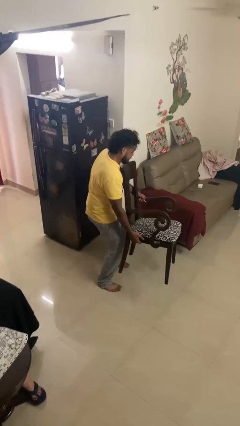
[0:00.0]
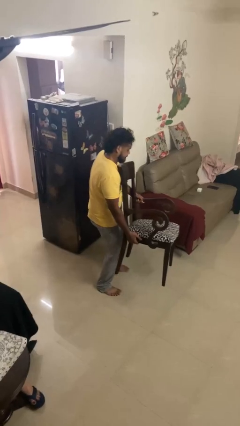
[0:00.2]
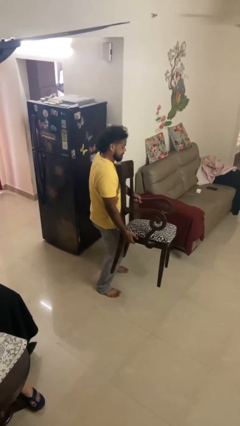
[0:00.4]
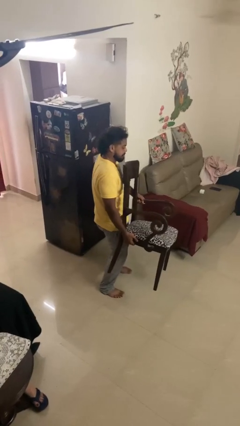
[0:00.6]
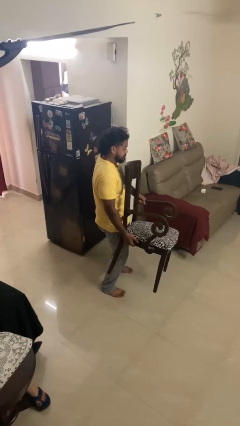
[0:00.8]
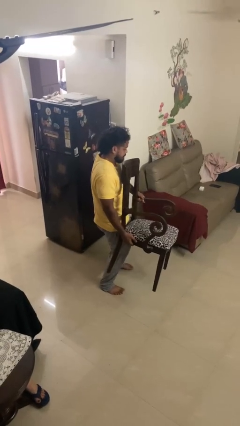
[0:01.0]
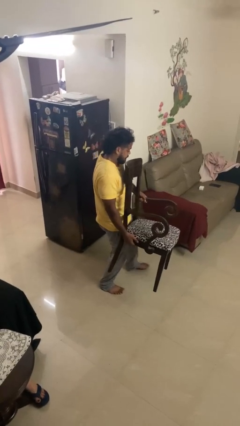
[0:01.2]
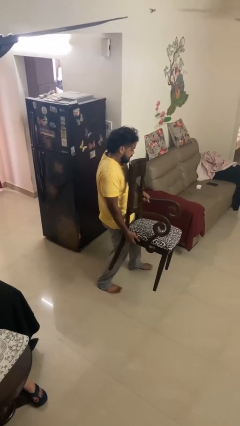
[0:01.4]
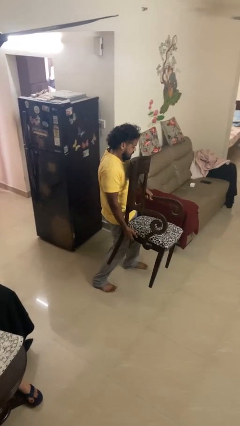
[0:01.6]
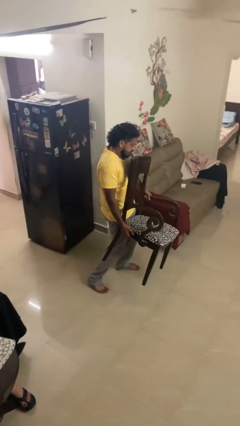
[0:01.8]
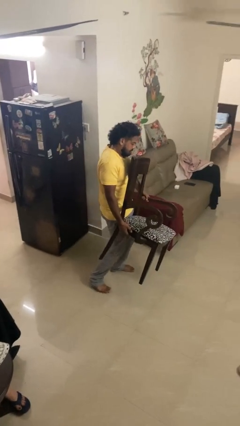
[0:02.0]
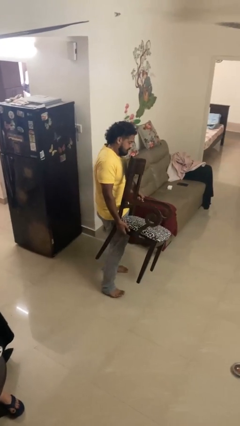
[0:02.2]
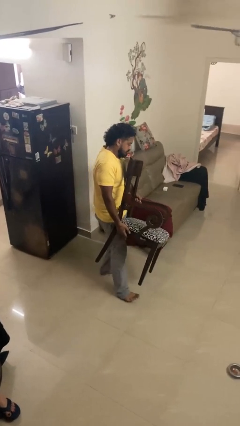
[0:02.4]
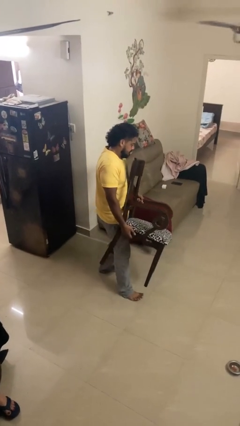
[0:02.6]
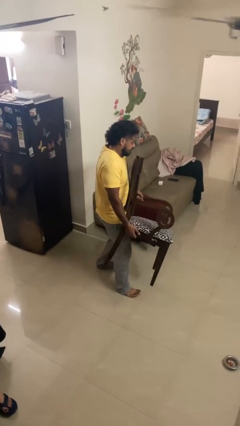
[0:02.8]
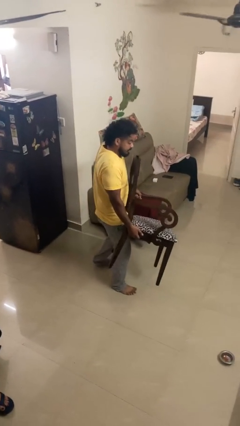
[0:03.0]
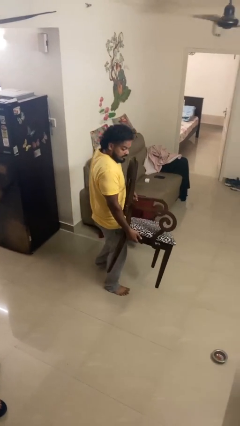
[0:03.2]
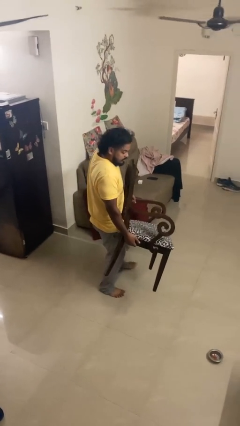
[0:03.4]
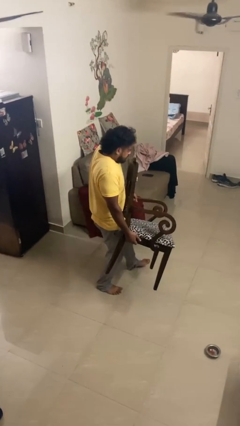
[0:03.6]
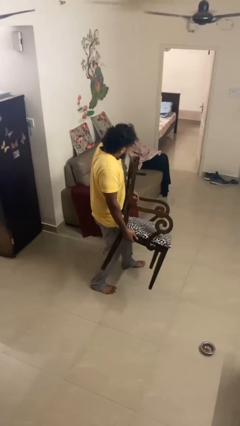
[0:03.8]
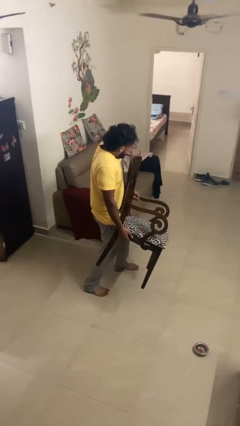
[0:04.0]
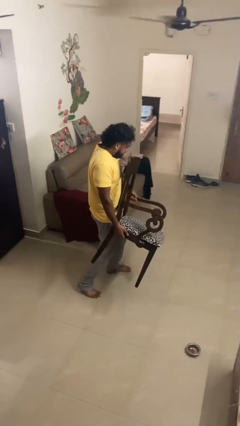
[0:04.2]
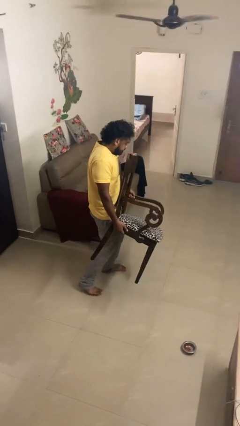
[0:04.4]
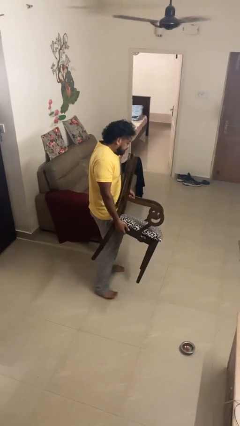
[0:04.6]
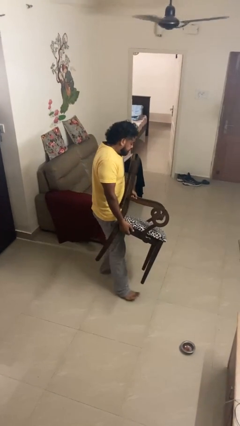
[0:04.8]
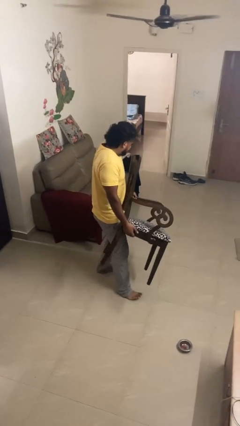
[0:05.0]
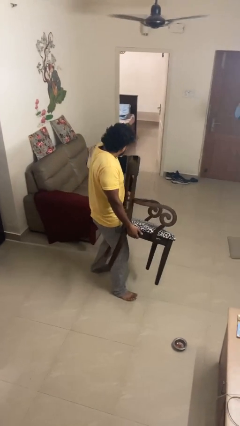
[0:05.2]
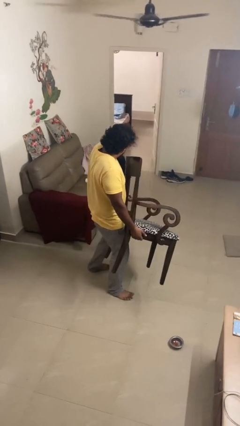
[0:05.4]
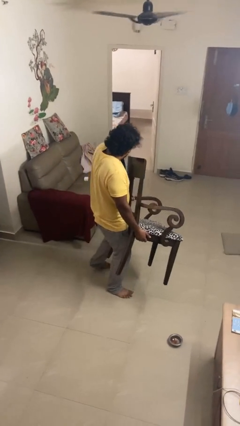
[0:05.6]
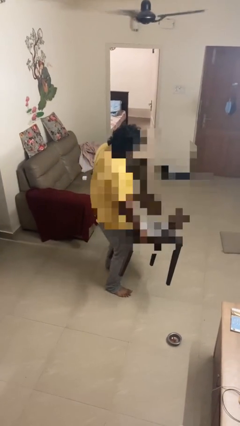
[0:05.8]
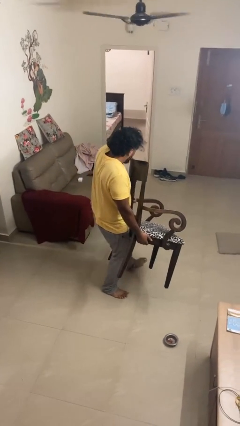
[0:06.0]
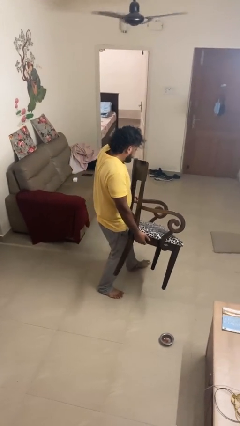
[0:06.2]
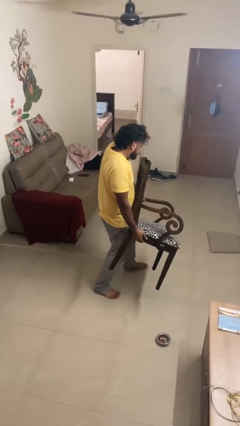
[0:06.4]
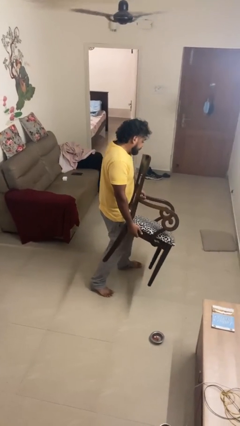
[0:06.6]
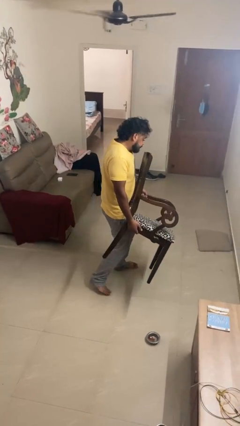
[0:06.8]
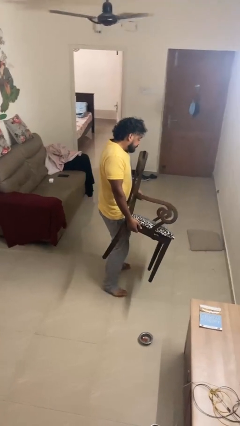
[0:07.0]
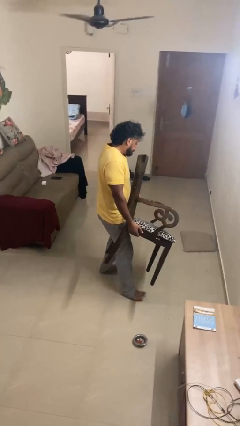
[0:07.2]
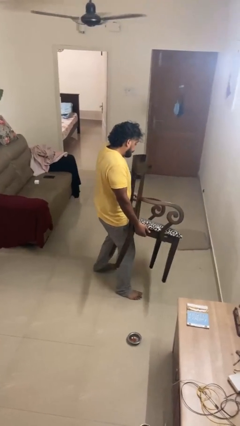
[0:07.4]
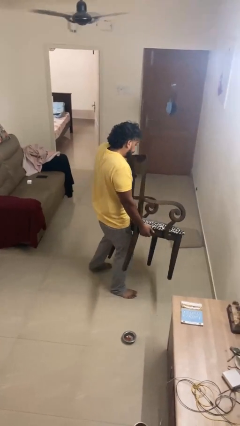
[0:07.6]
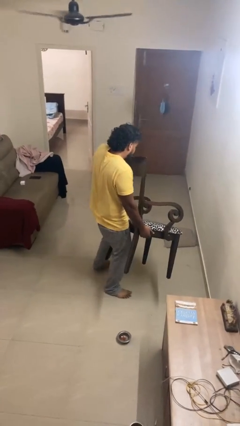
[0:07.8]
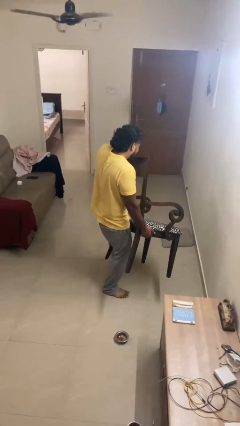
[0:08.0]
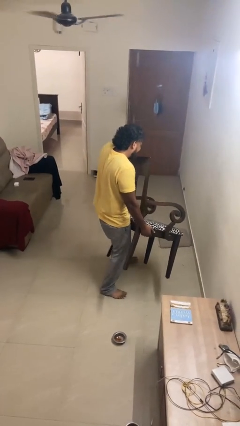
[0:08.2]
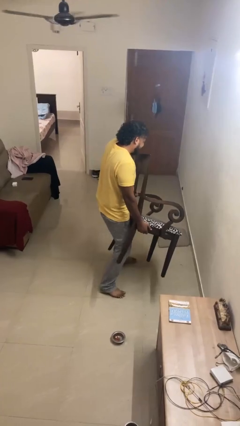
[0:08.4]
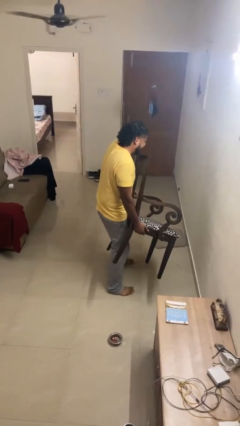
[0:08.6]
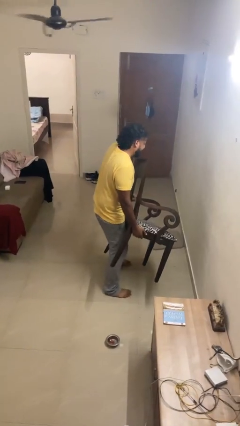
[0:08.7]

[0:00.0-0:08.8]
person carries heavy object

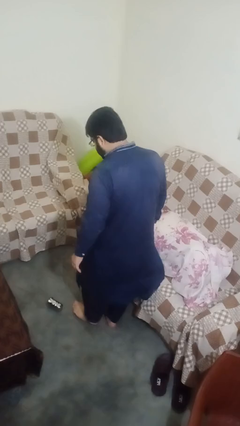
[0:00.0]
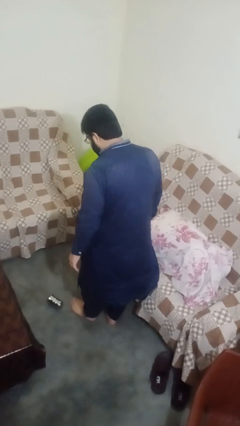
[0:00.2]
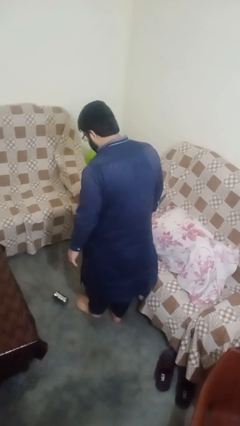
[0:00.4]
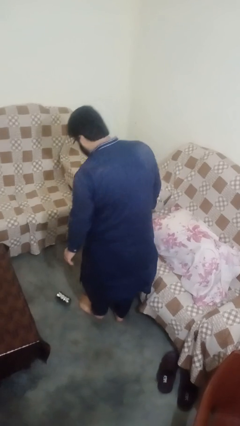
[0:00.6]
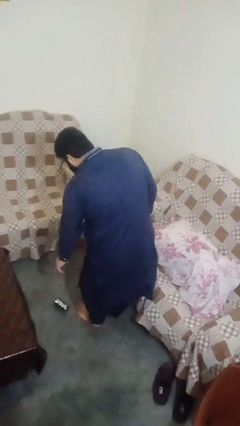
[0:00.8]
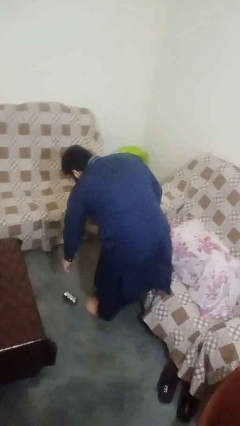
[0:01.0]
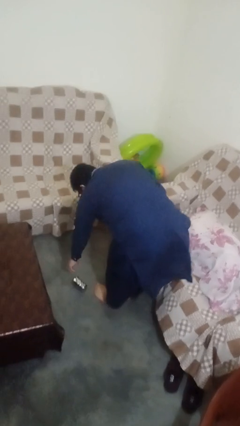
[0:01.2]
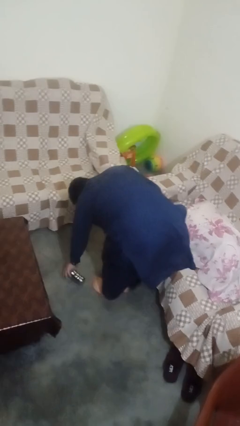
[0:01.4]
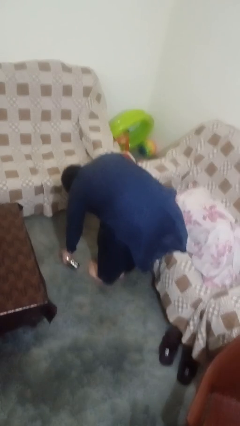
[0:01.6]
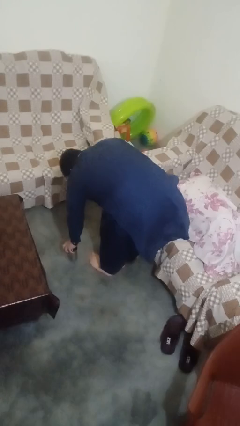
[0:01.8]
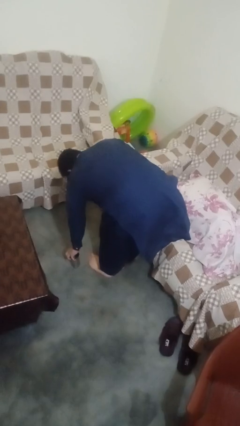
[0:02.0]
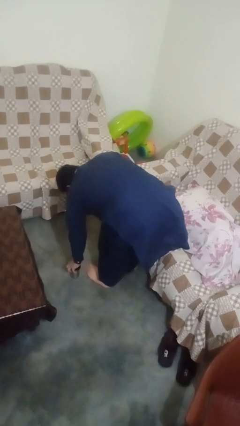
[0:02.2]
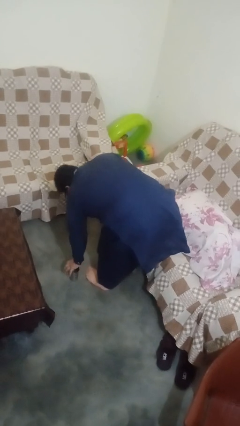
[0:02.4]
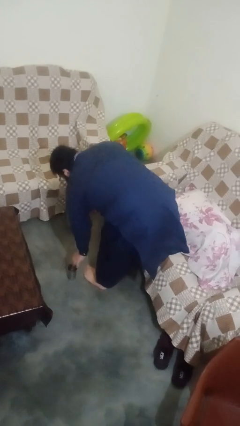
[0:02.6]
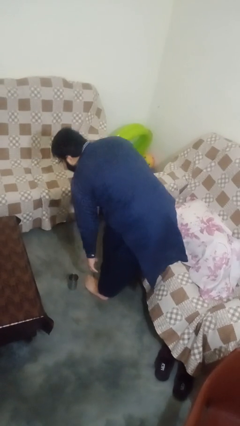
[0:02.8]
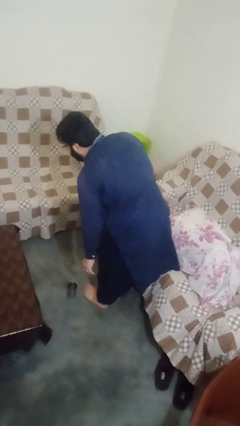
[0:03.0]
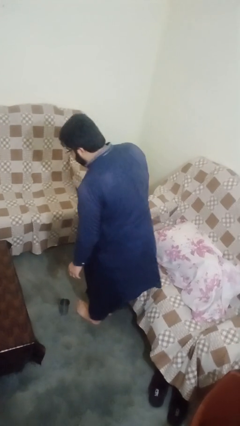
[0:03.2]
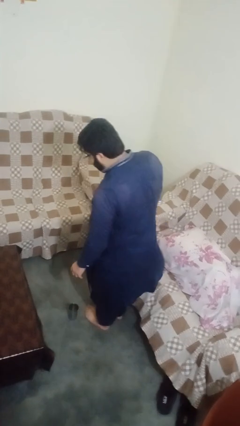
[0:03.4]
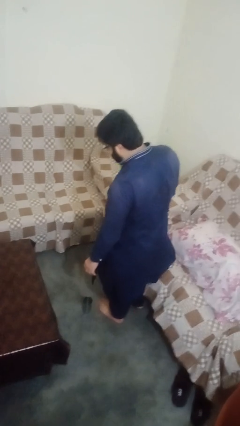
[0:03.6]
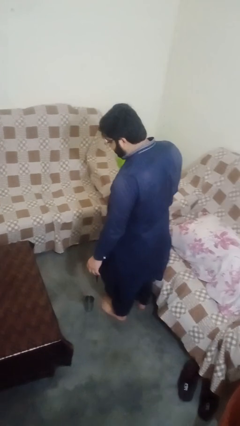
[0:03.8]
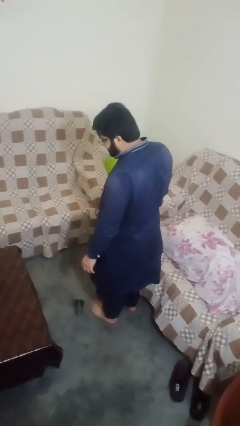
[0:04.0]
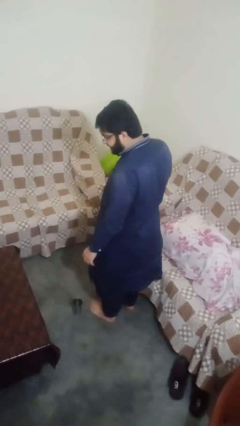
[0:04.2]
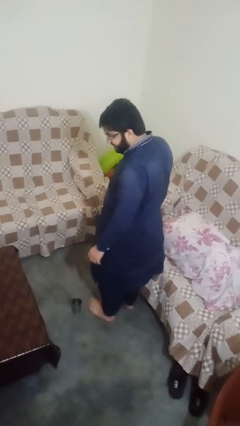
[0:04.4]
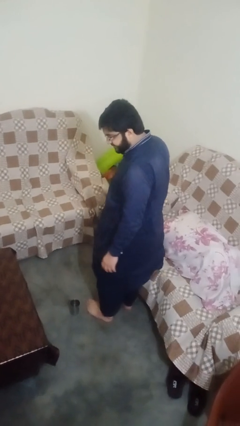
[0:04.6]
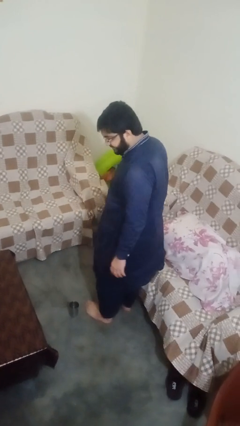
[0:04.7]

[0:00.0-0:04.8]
person sets upright glass

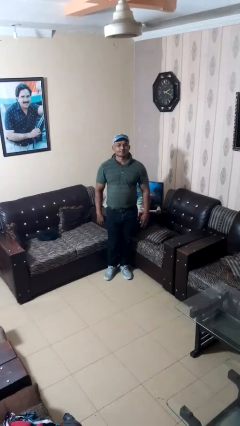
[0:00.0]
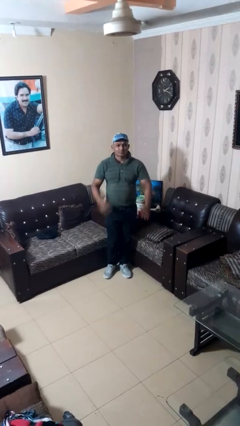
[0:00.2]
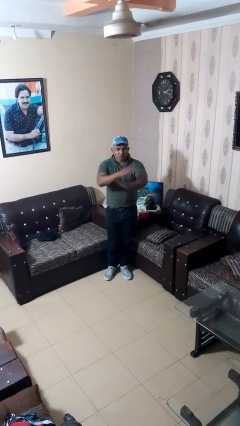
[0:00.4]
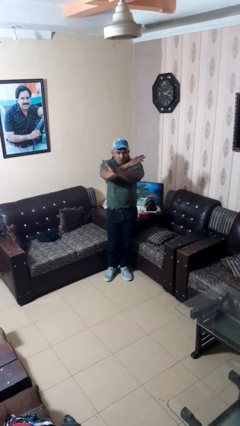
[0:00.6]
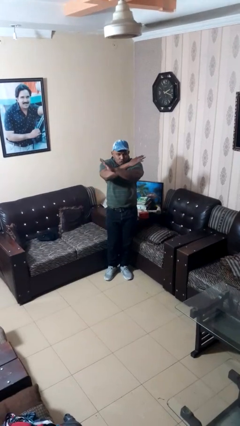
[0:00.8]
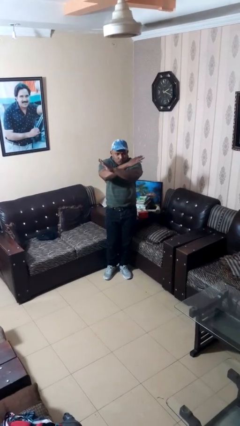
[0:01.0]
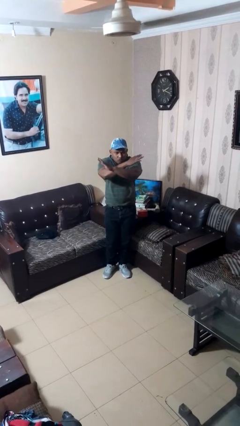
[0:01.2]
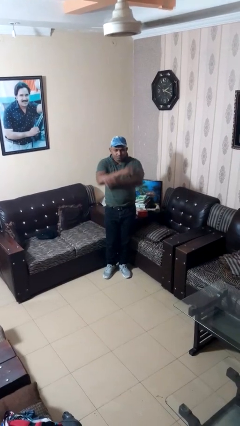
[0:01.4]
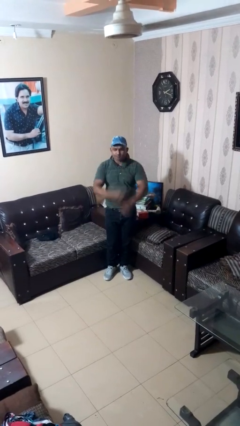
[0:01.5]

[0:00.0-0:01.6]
person gestures arms x

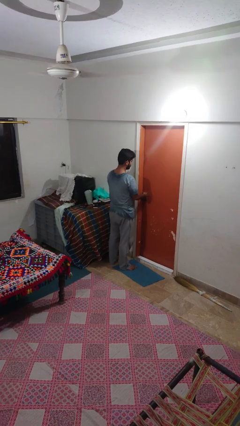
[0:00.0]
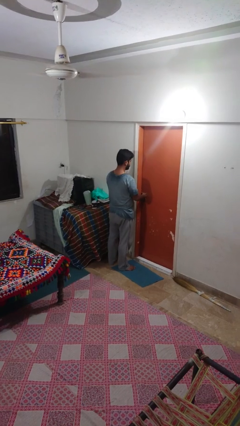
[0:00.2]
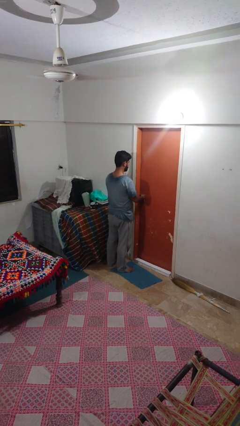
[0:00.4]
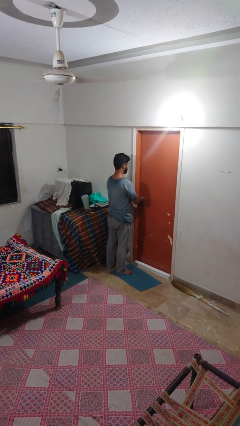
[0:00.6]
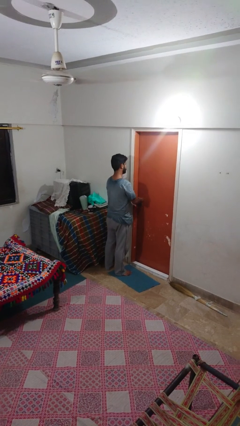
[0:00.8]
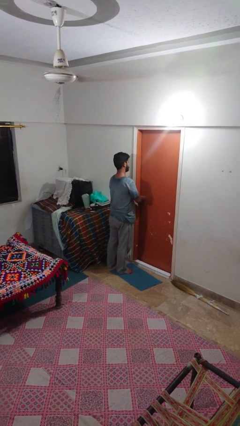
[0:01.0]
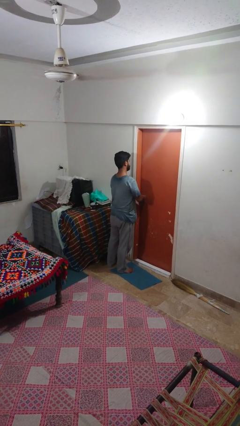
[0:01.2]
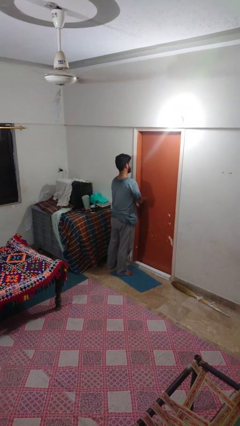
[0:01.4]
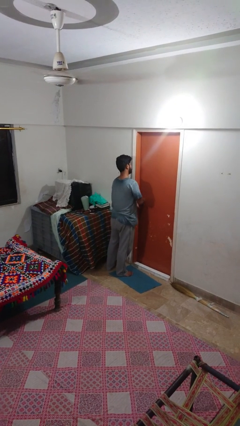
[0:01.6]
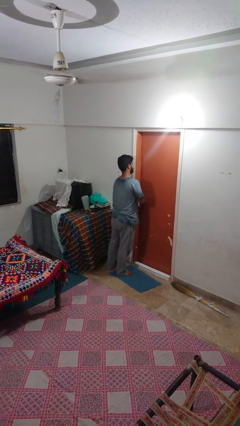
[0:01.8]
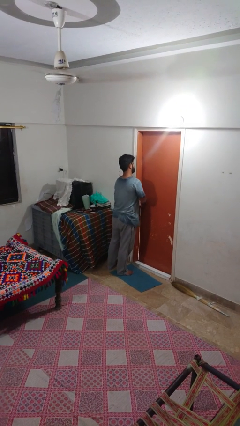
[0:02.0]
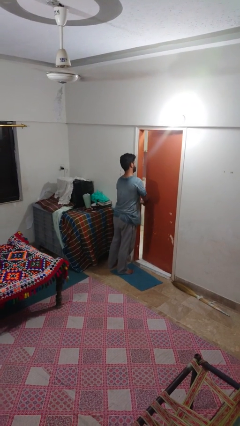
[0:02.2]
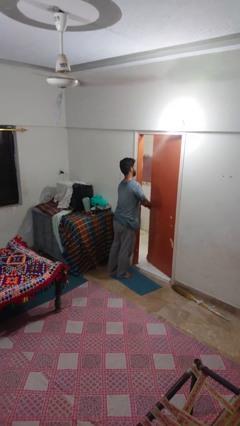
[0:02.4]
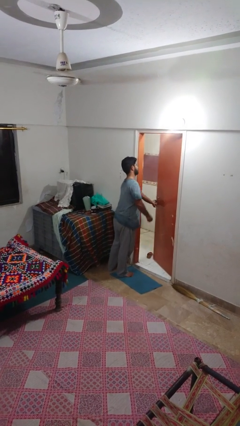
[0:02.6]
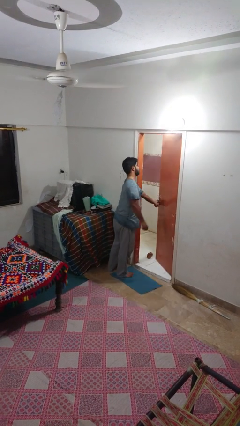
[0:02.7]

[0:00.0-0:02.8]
person unlocks door with keys
